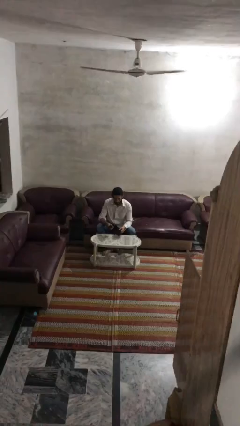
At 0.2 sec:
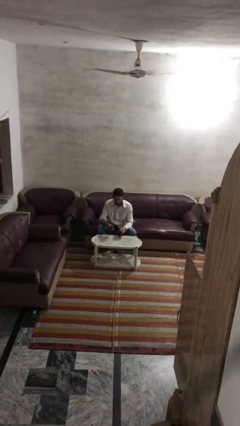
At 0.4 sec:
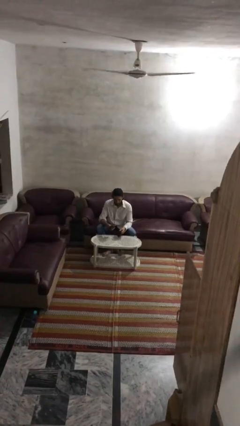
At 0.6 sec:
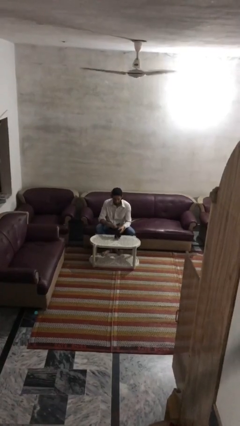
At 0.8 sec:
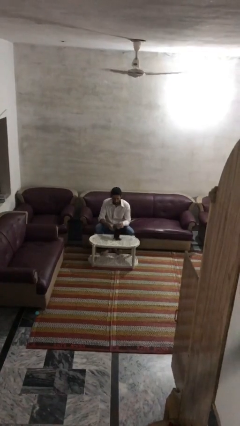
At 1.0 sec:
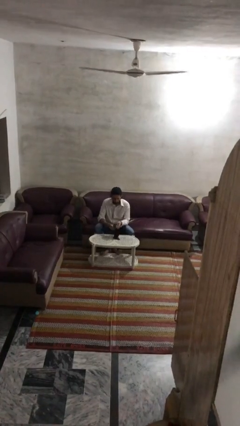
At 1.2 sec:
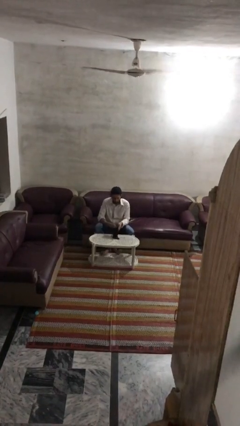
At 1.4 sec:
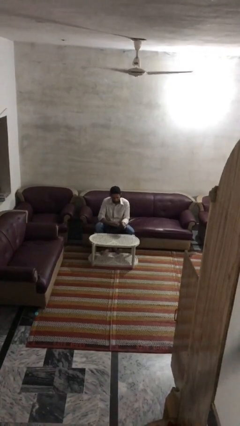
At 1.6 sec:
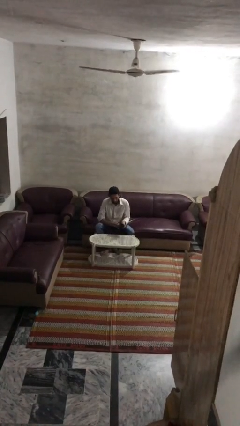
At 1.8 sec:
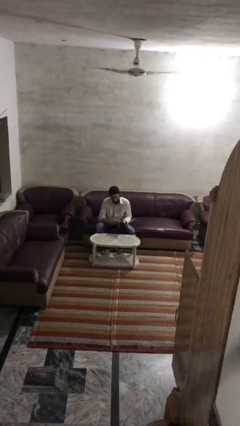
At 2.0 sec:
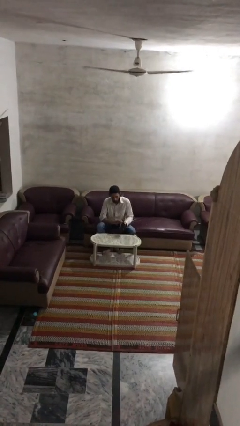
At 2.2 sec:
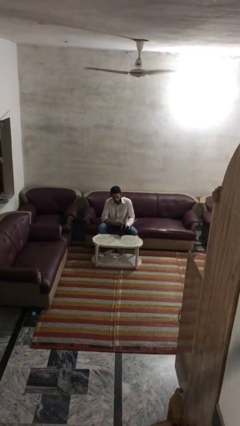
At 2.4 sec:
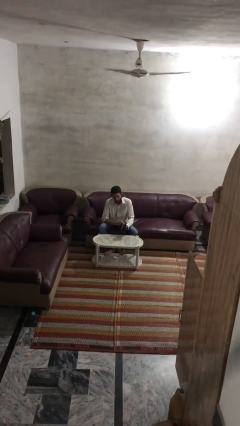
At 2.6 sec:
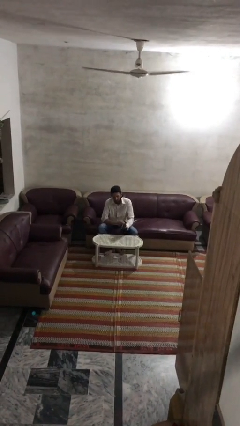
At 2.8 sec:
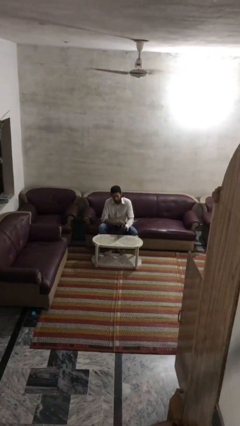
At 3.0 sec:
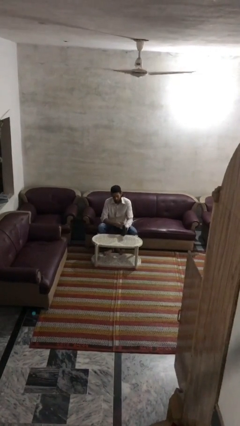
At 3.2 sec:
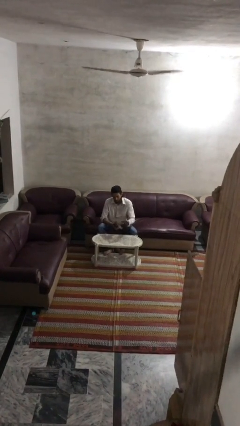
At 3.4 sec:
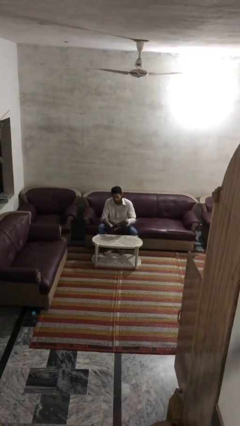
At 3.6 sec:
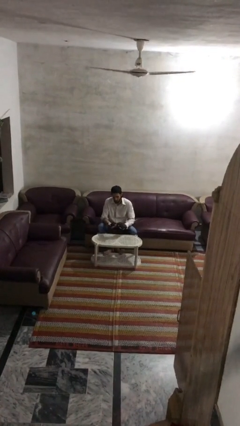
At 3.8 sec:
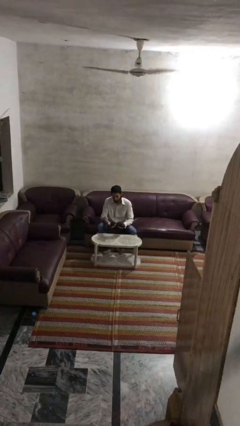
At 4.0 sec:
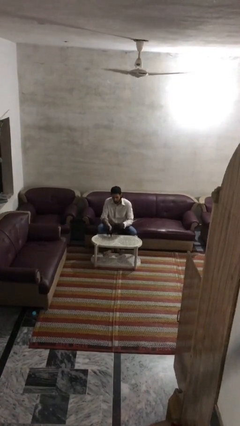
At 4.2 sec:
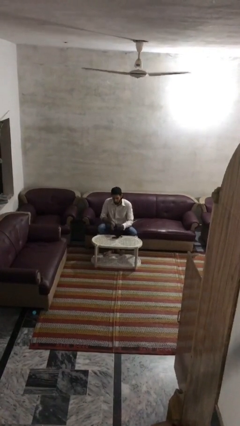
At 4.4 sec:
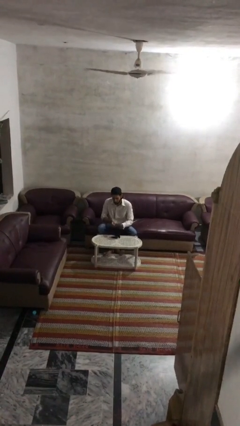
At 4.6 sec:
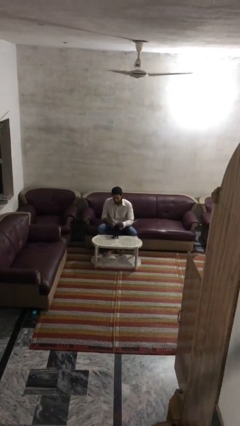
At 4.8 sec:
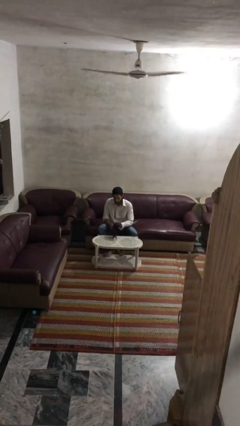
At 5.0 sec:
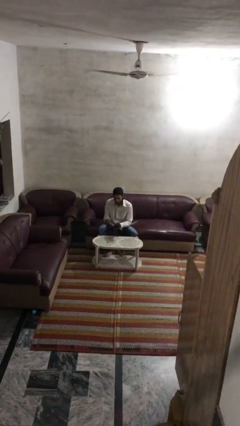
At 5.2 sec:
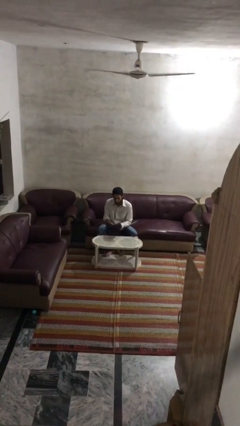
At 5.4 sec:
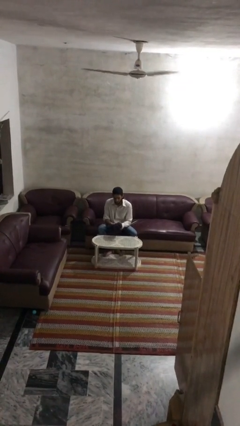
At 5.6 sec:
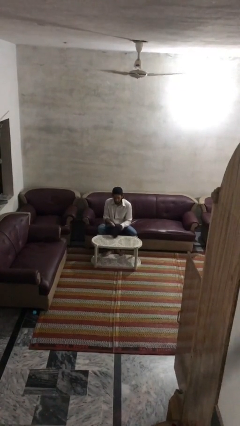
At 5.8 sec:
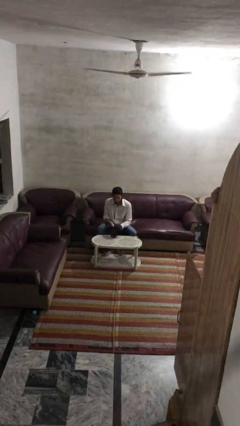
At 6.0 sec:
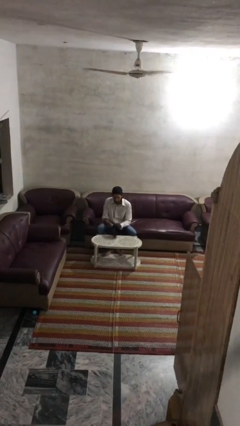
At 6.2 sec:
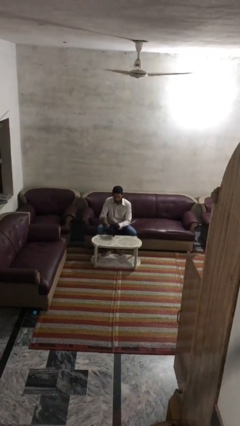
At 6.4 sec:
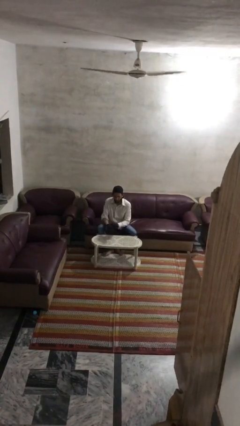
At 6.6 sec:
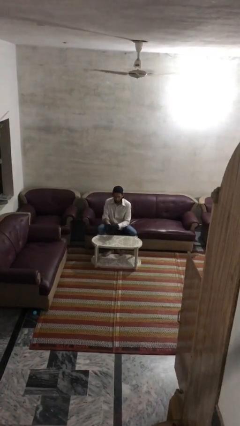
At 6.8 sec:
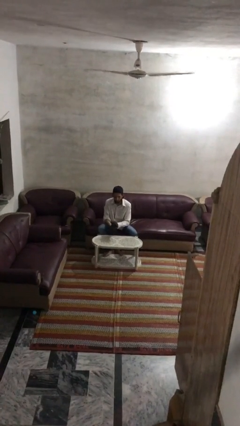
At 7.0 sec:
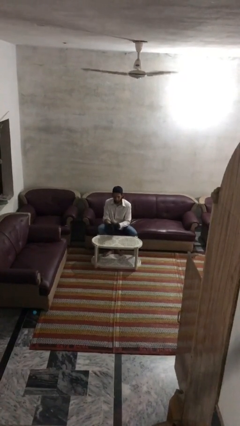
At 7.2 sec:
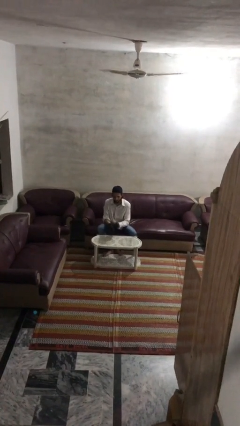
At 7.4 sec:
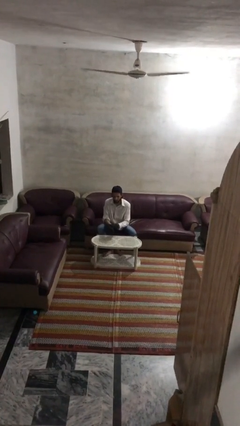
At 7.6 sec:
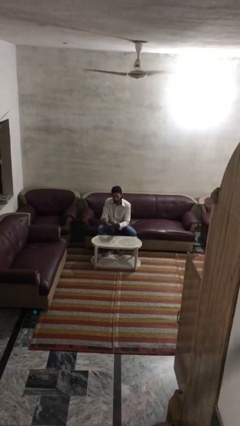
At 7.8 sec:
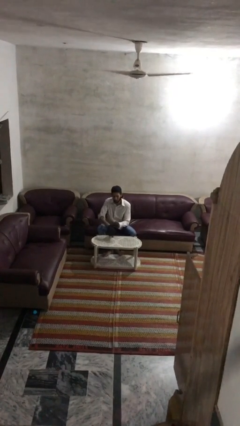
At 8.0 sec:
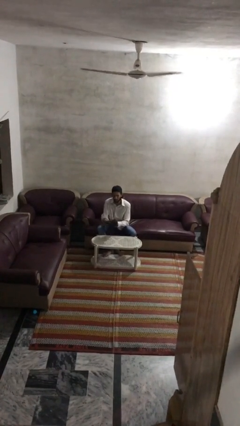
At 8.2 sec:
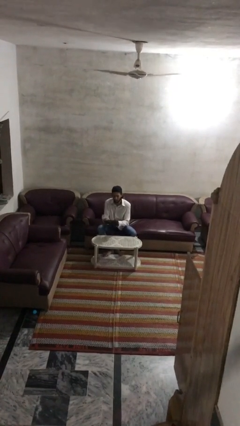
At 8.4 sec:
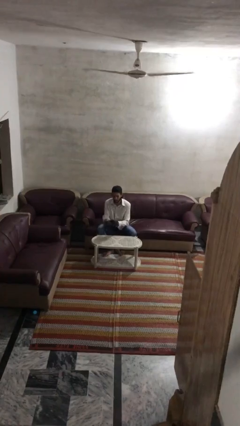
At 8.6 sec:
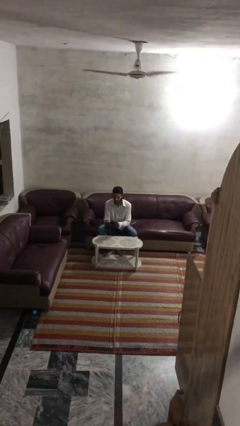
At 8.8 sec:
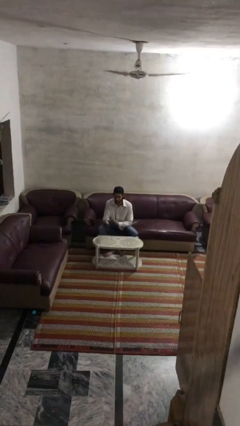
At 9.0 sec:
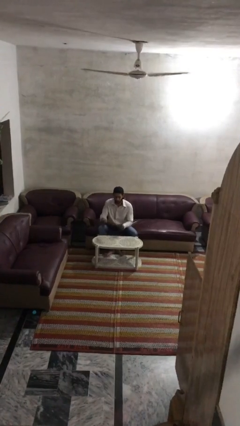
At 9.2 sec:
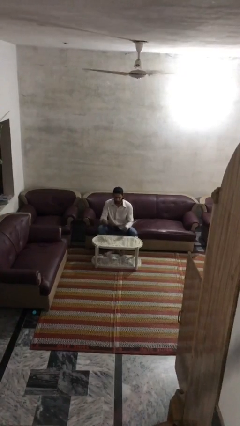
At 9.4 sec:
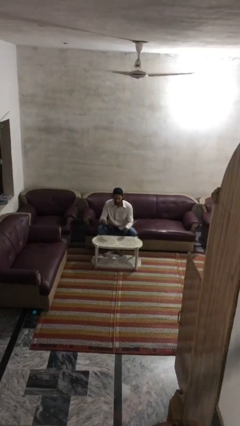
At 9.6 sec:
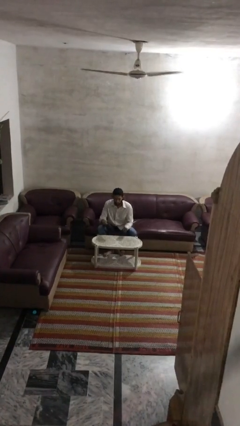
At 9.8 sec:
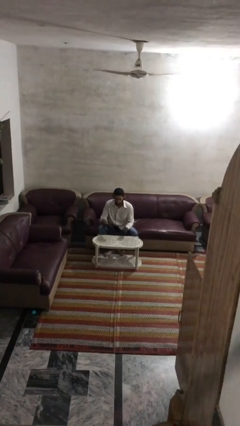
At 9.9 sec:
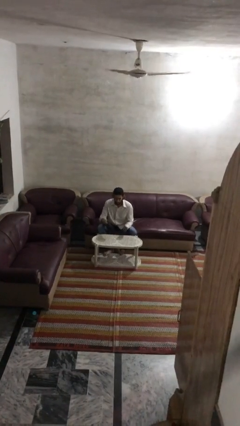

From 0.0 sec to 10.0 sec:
person puts on gloves

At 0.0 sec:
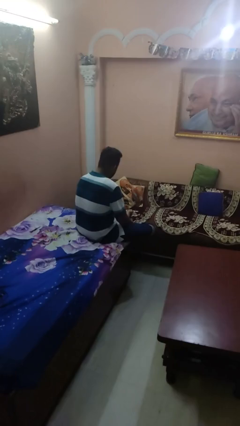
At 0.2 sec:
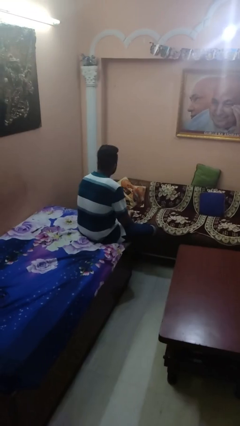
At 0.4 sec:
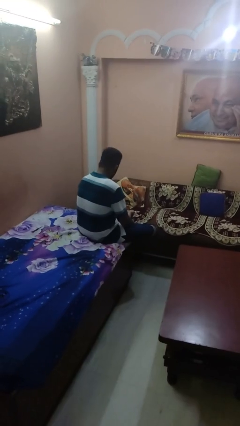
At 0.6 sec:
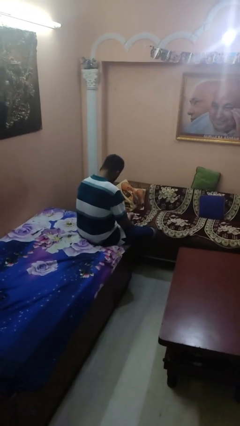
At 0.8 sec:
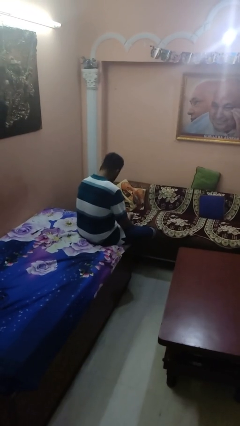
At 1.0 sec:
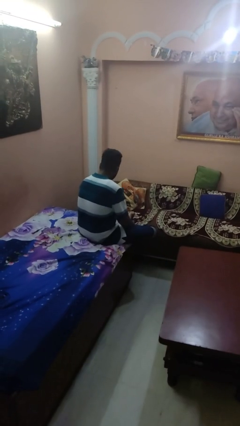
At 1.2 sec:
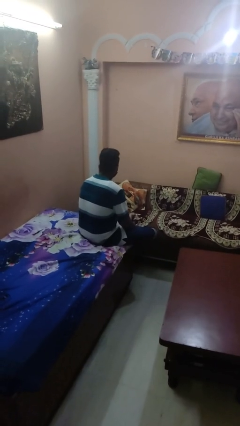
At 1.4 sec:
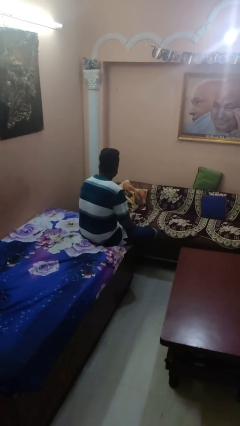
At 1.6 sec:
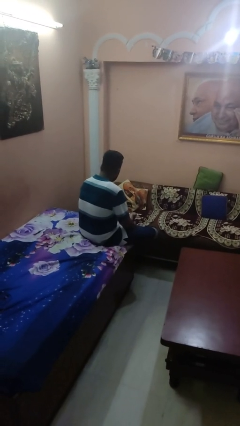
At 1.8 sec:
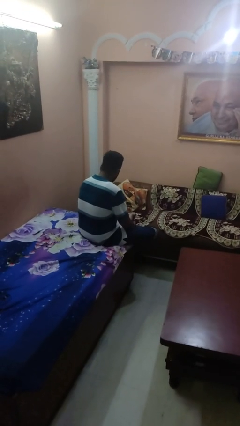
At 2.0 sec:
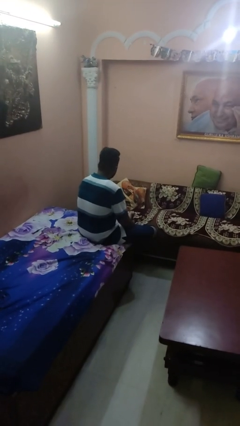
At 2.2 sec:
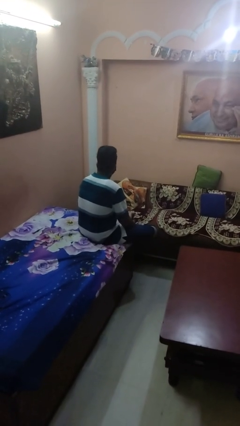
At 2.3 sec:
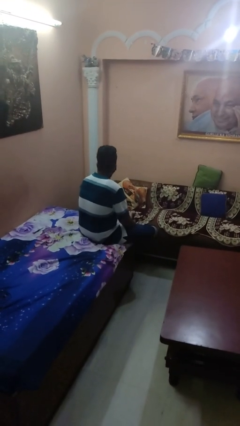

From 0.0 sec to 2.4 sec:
person nods head

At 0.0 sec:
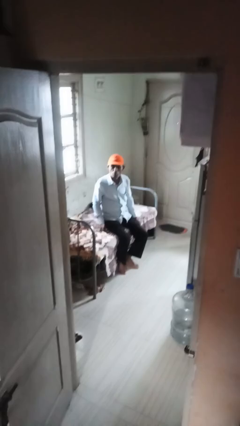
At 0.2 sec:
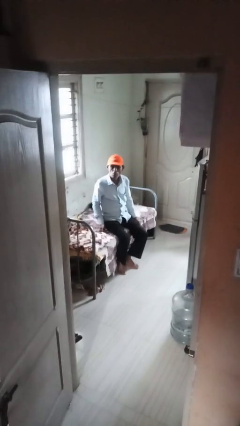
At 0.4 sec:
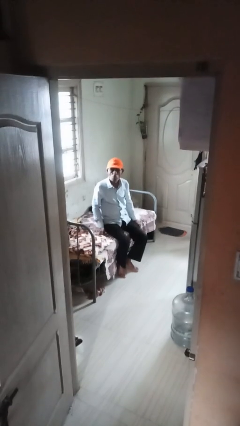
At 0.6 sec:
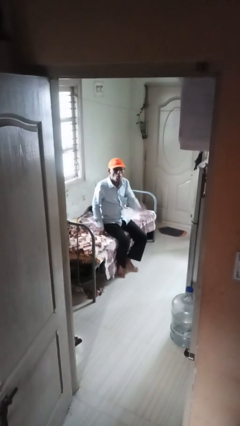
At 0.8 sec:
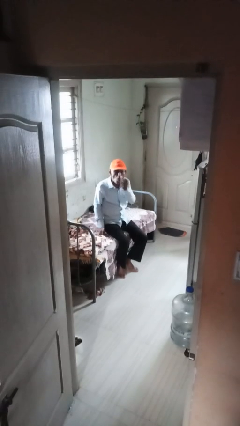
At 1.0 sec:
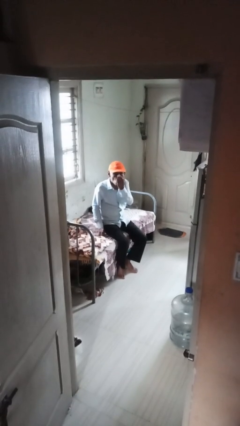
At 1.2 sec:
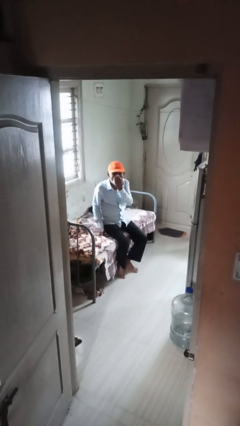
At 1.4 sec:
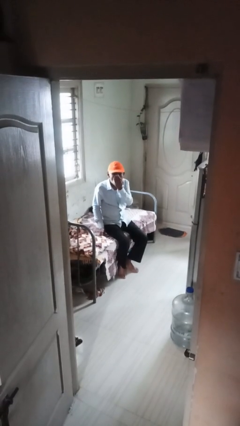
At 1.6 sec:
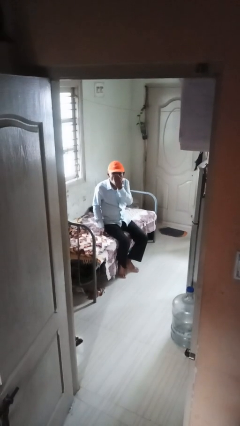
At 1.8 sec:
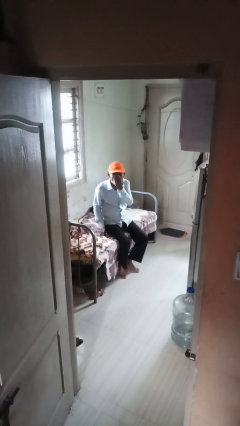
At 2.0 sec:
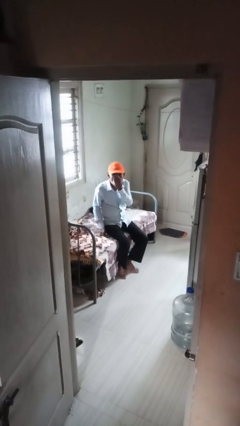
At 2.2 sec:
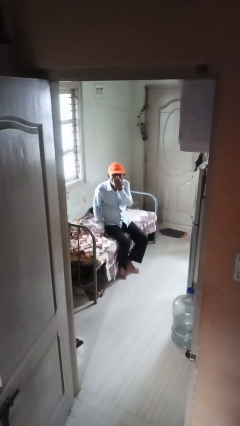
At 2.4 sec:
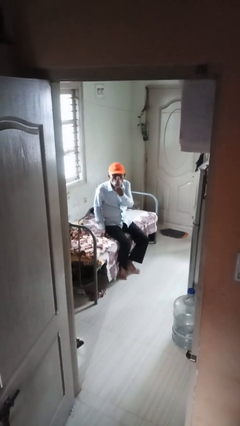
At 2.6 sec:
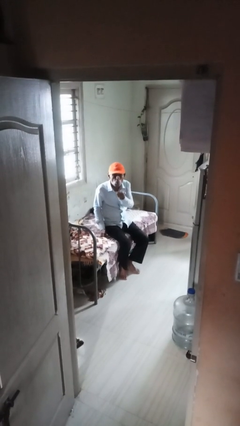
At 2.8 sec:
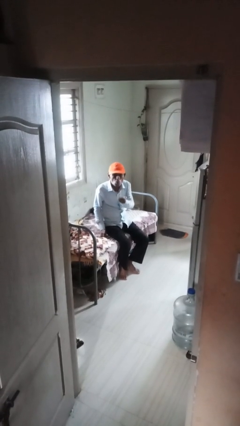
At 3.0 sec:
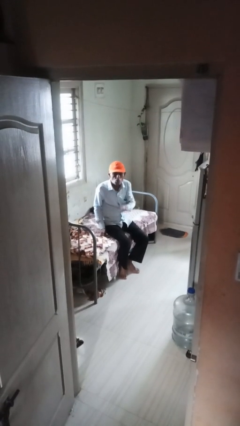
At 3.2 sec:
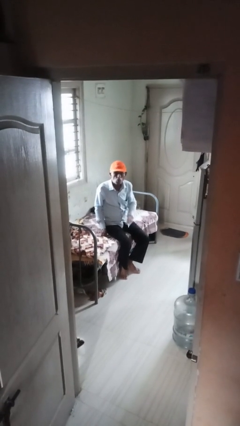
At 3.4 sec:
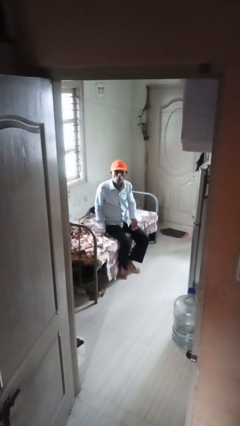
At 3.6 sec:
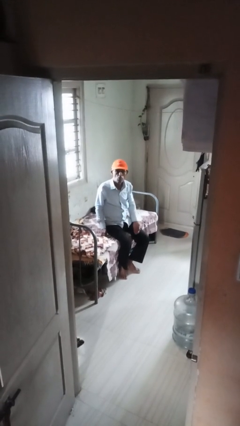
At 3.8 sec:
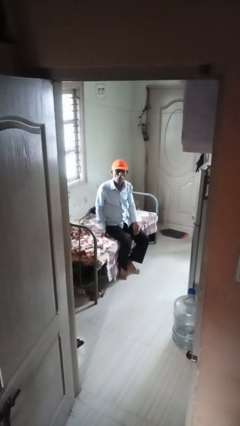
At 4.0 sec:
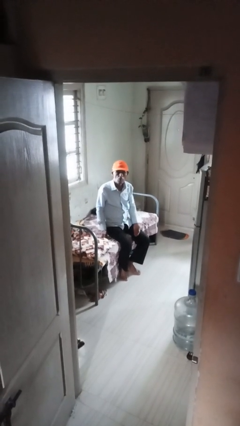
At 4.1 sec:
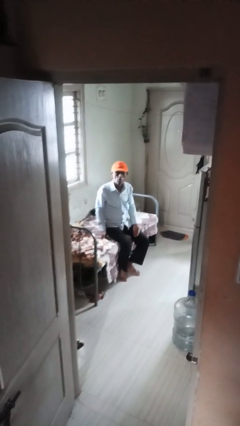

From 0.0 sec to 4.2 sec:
person gestures blow kiss

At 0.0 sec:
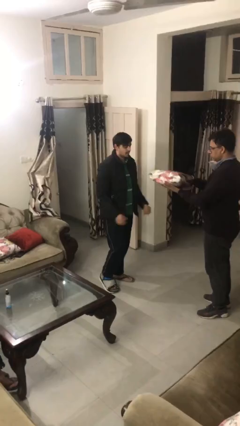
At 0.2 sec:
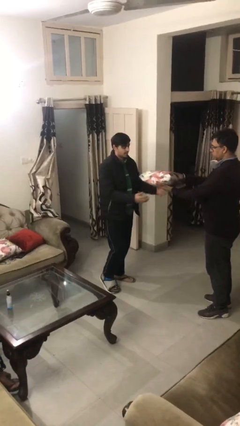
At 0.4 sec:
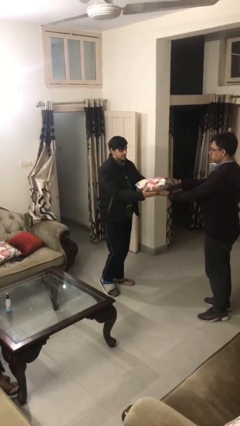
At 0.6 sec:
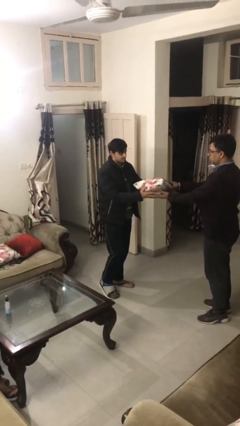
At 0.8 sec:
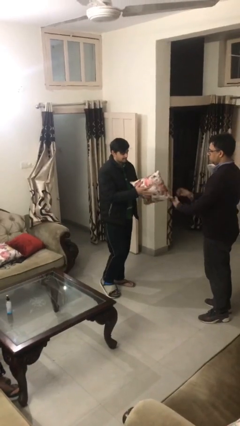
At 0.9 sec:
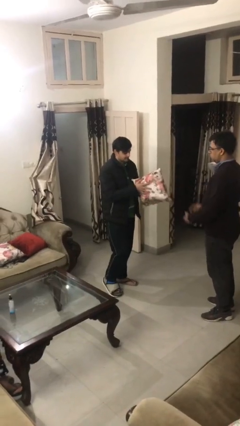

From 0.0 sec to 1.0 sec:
person transfers object to person

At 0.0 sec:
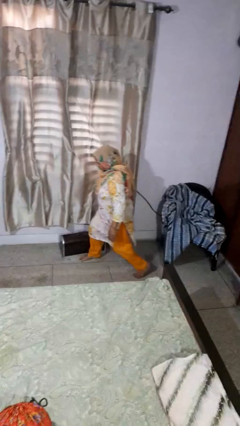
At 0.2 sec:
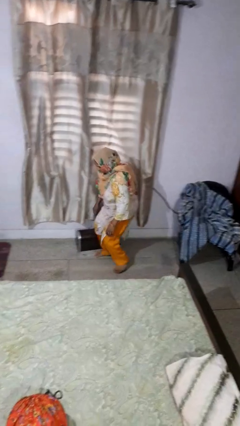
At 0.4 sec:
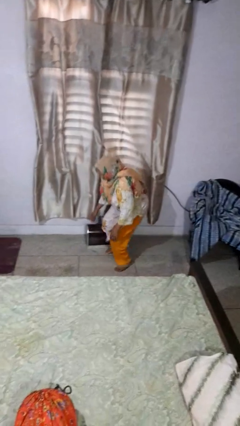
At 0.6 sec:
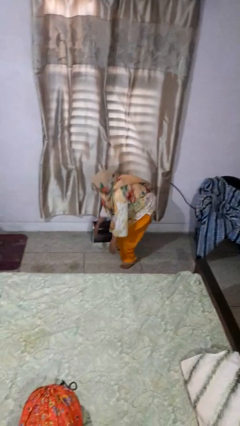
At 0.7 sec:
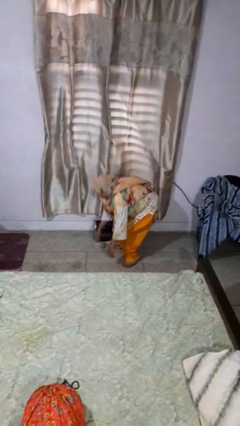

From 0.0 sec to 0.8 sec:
person trips on object on floor
